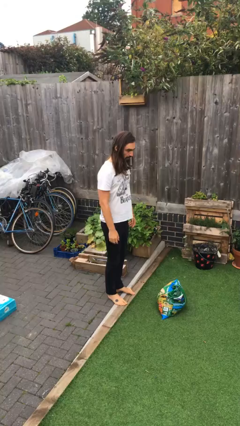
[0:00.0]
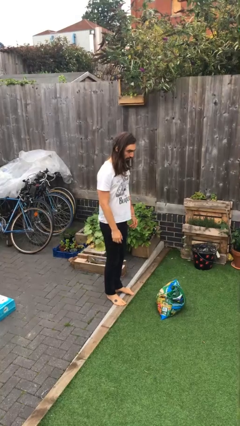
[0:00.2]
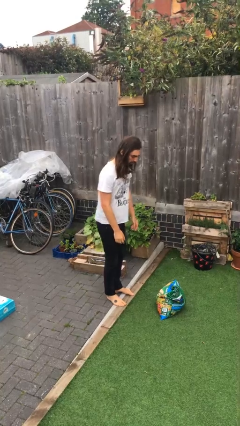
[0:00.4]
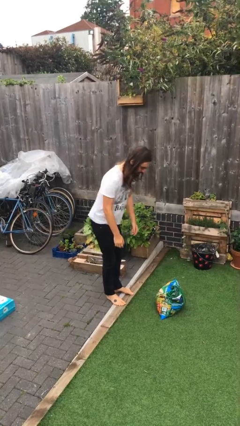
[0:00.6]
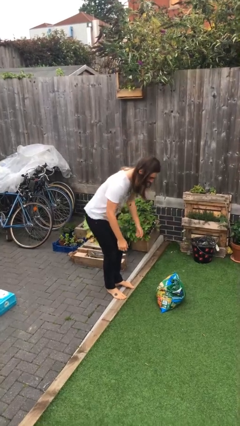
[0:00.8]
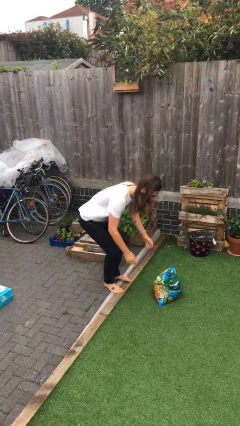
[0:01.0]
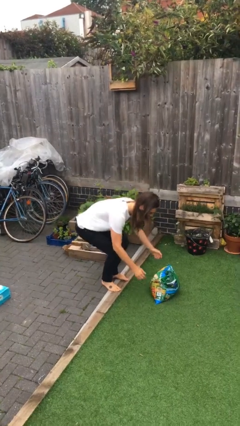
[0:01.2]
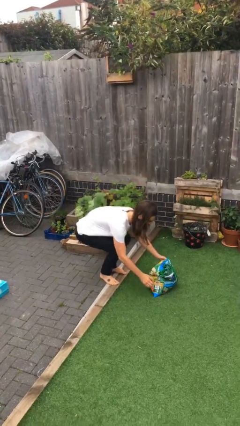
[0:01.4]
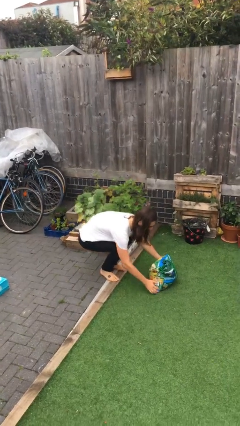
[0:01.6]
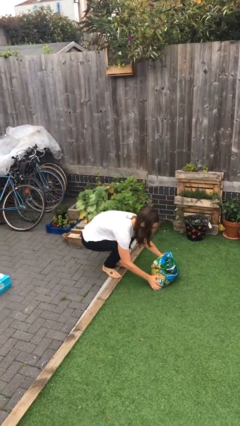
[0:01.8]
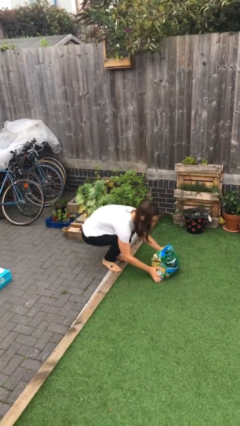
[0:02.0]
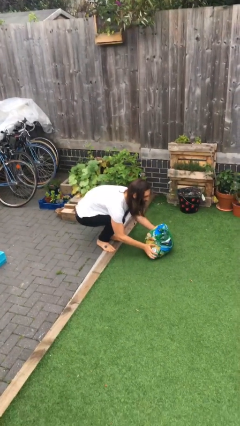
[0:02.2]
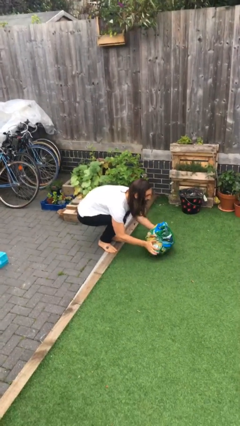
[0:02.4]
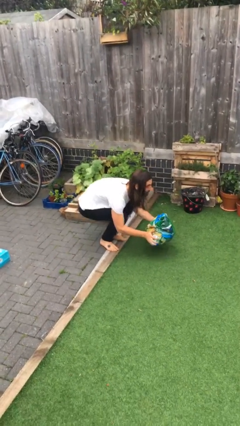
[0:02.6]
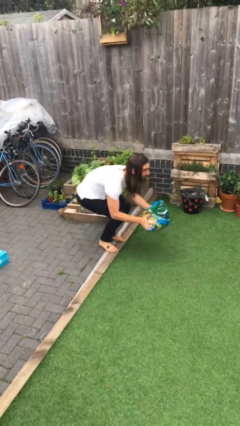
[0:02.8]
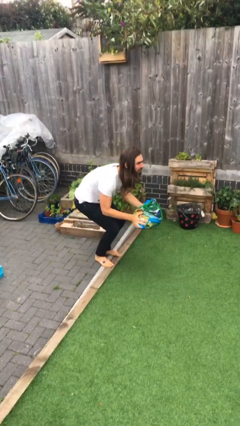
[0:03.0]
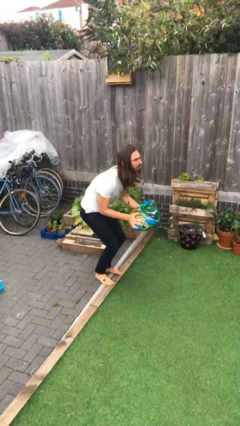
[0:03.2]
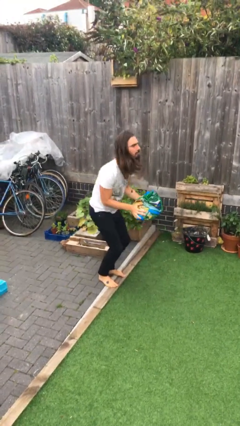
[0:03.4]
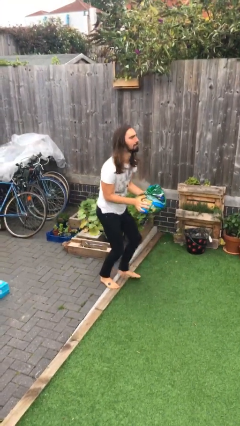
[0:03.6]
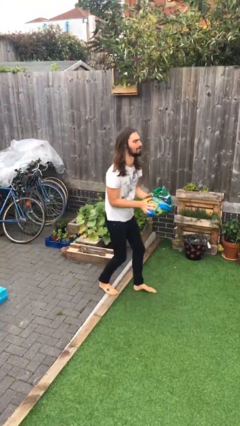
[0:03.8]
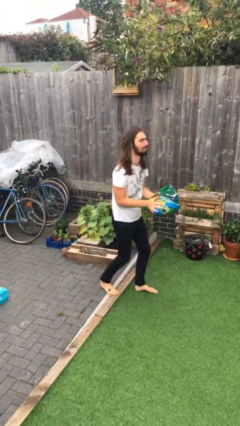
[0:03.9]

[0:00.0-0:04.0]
person picks up object from floor

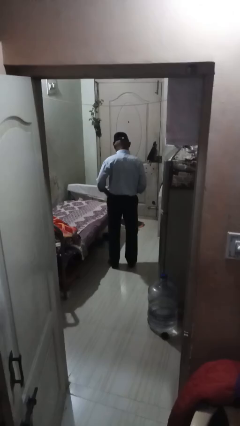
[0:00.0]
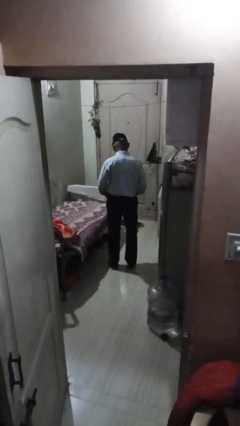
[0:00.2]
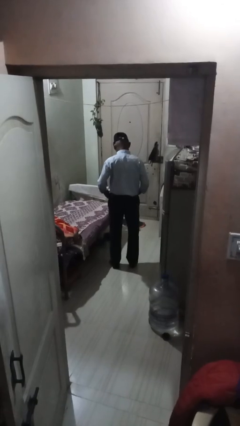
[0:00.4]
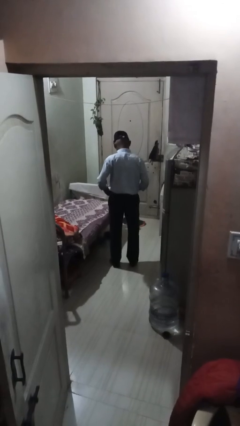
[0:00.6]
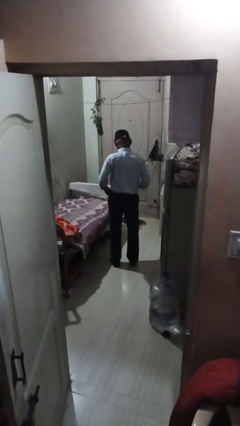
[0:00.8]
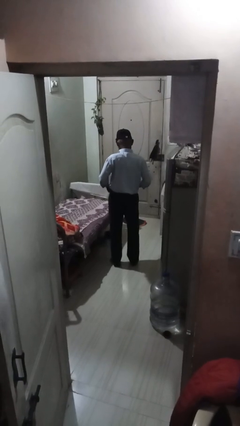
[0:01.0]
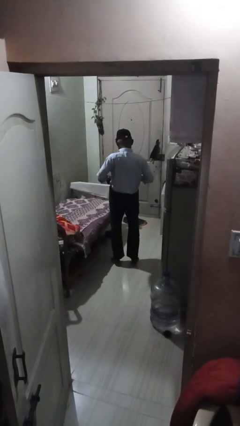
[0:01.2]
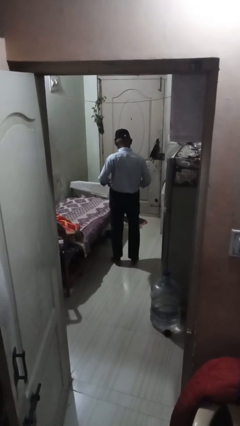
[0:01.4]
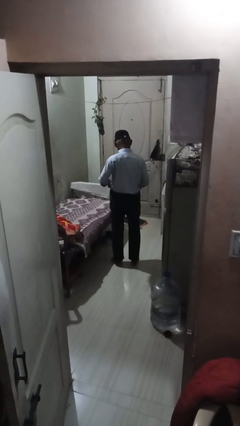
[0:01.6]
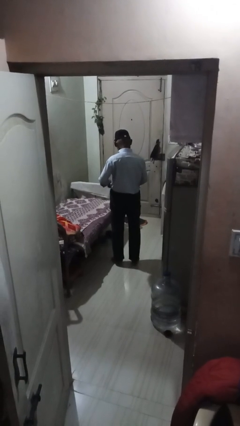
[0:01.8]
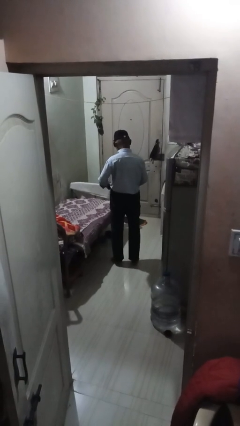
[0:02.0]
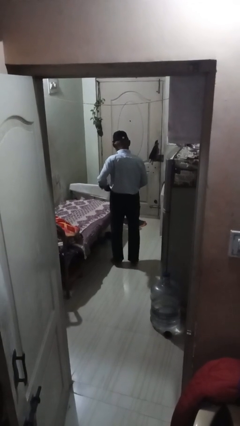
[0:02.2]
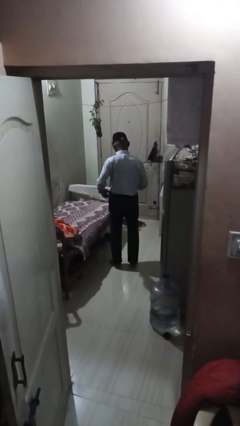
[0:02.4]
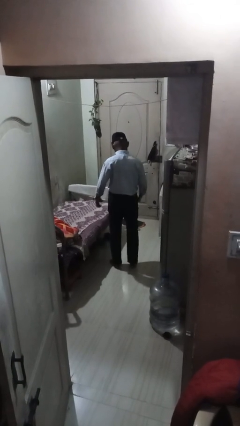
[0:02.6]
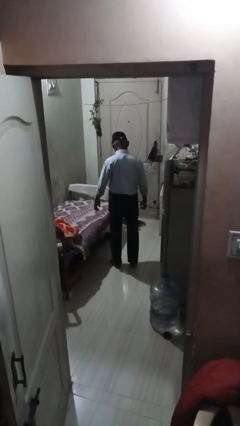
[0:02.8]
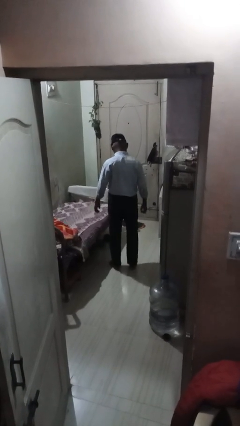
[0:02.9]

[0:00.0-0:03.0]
person hikes up pants

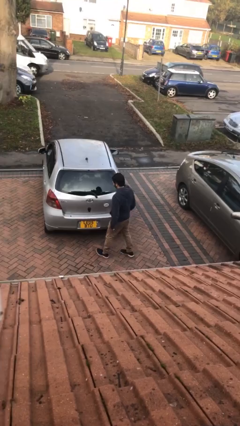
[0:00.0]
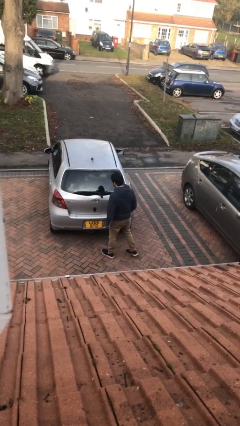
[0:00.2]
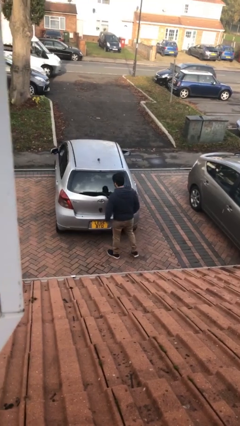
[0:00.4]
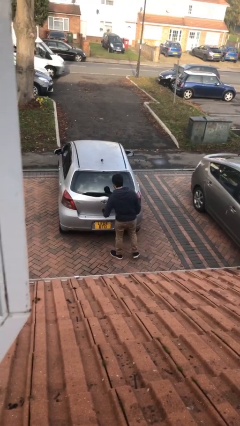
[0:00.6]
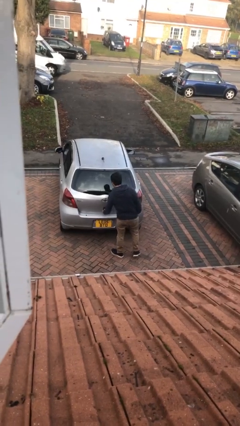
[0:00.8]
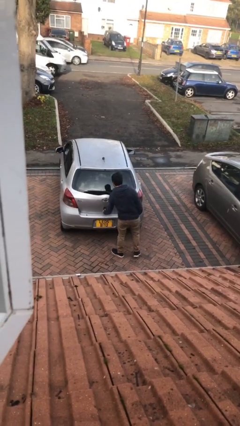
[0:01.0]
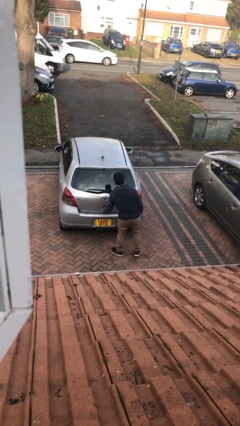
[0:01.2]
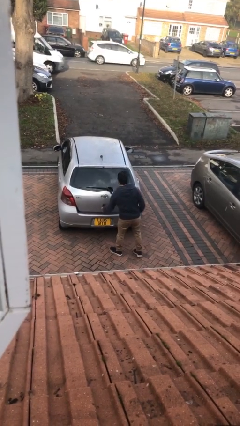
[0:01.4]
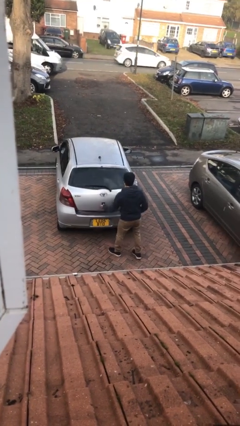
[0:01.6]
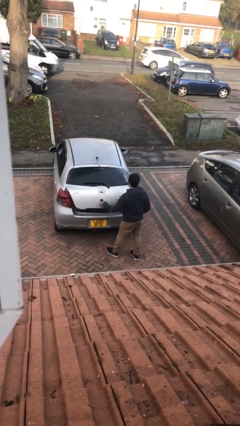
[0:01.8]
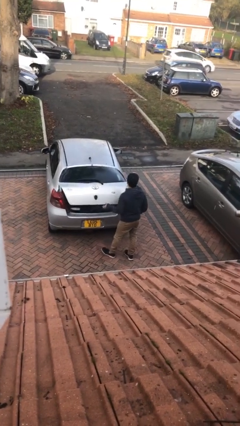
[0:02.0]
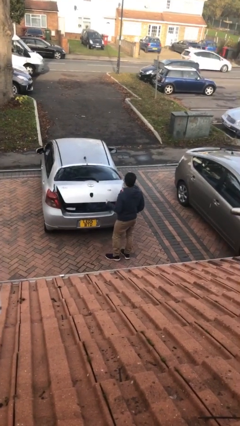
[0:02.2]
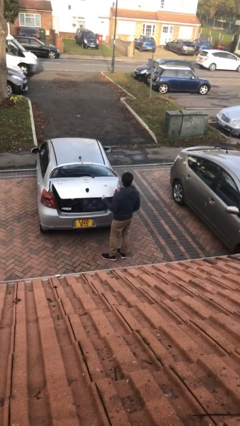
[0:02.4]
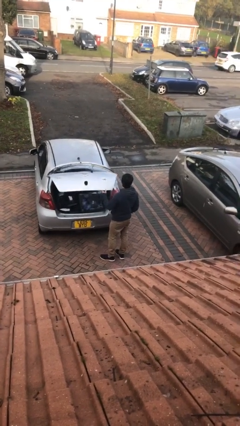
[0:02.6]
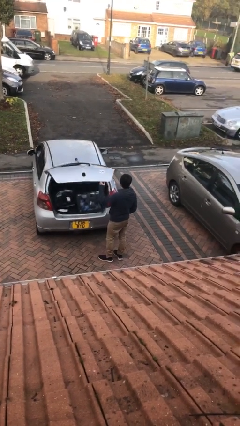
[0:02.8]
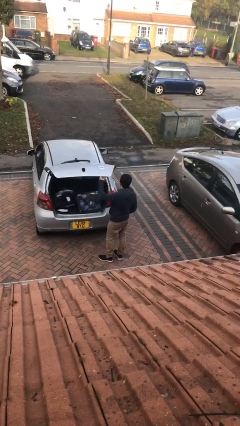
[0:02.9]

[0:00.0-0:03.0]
person opens car trunk

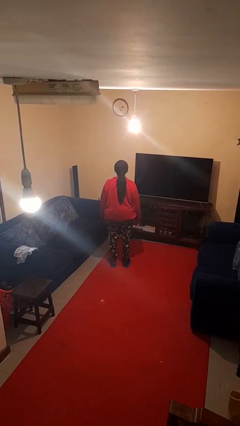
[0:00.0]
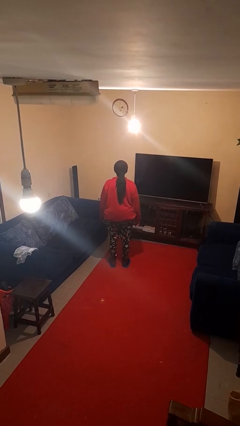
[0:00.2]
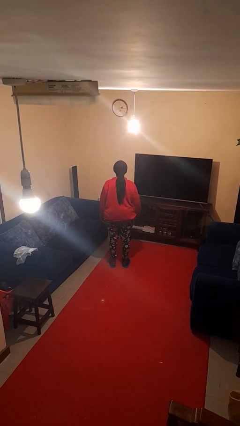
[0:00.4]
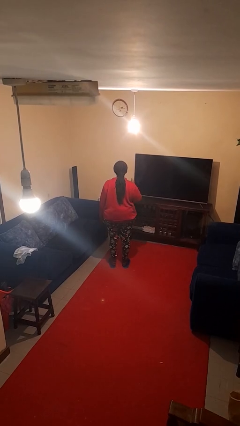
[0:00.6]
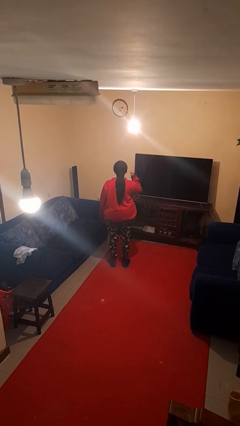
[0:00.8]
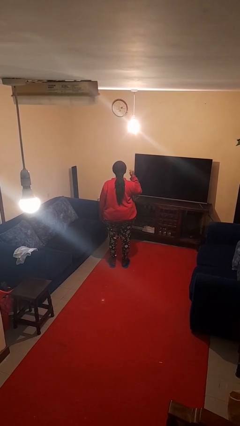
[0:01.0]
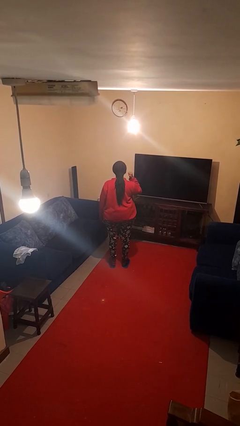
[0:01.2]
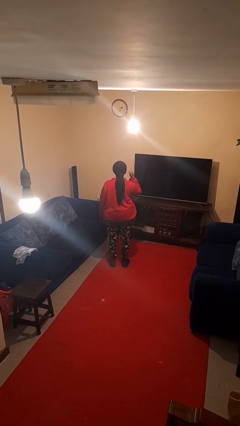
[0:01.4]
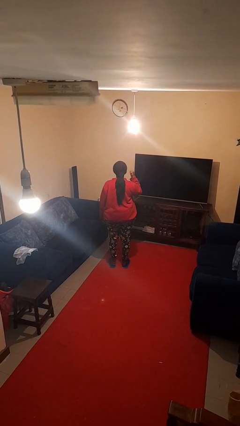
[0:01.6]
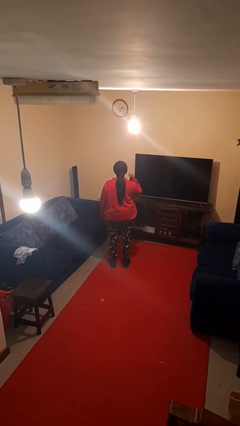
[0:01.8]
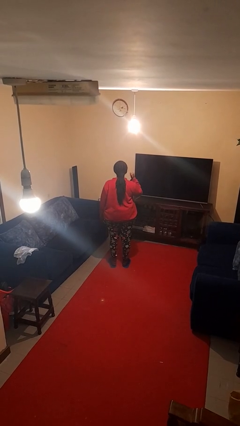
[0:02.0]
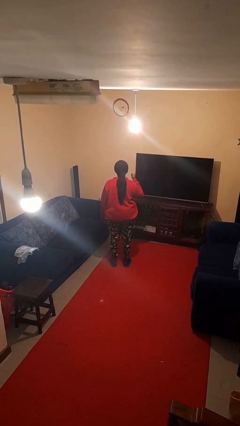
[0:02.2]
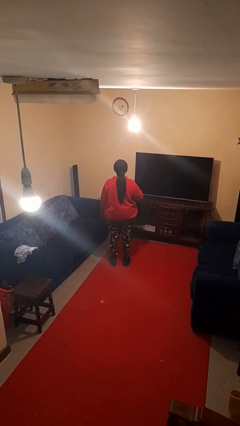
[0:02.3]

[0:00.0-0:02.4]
person gestures behind me

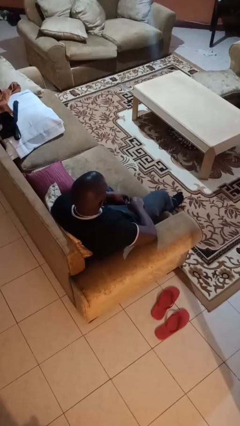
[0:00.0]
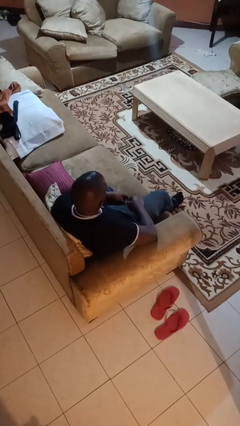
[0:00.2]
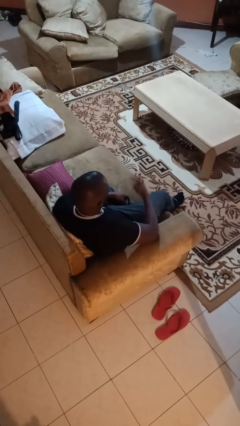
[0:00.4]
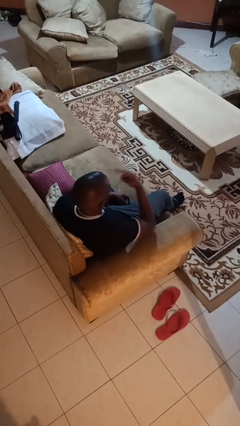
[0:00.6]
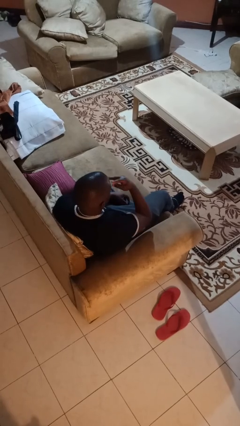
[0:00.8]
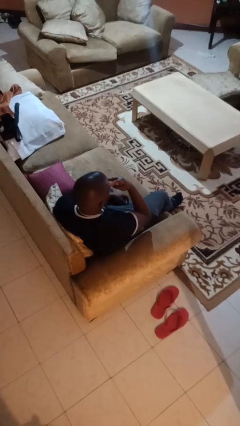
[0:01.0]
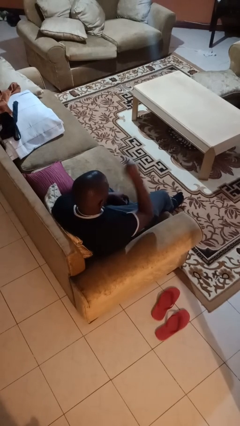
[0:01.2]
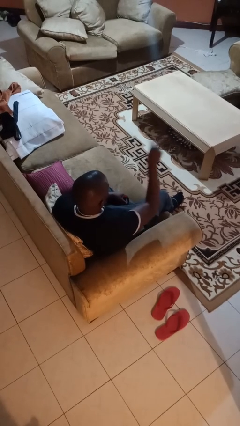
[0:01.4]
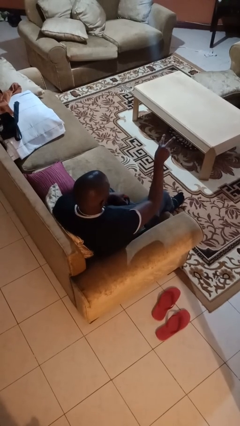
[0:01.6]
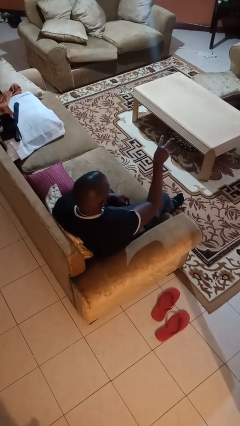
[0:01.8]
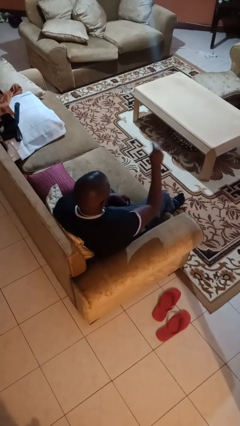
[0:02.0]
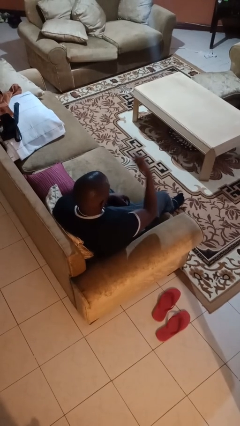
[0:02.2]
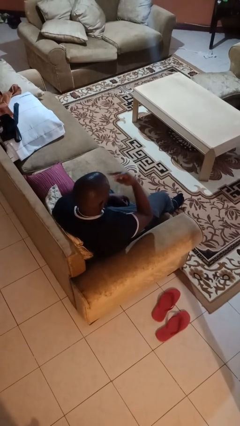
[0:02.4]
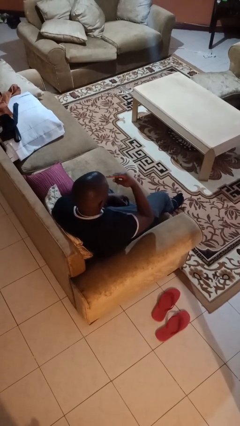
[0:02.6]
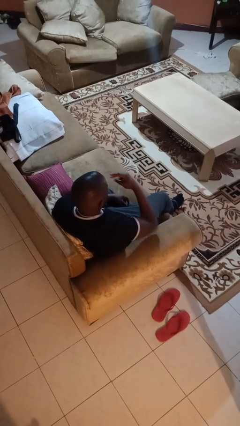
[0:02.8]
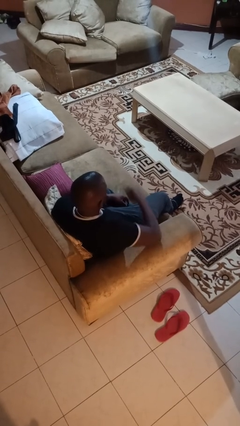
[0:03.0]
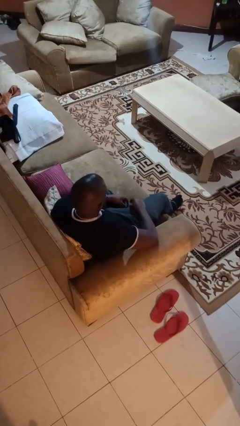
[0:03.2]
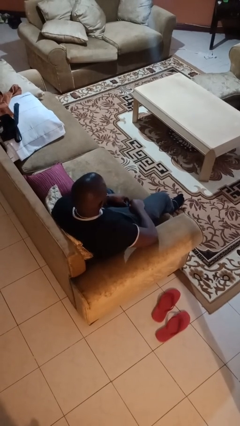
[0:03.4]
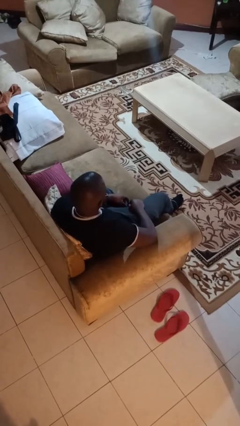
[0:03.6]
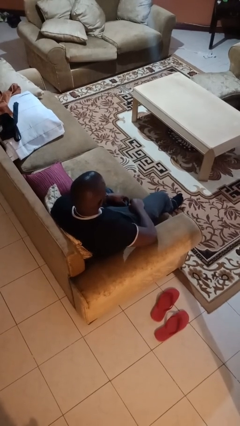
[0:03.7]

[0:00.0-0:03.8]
person gestures watch closely

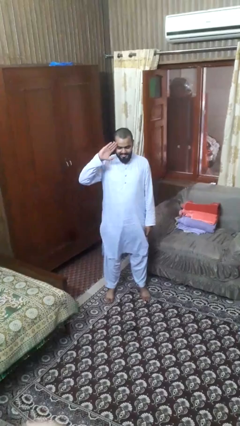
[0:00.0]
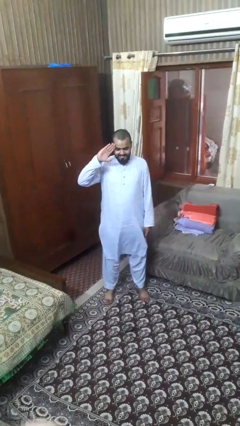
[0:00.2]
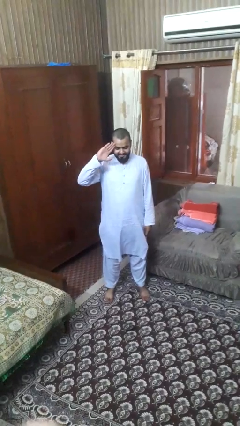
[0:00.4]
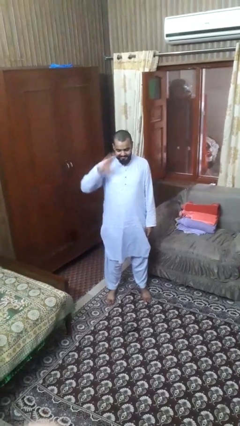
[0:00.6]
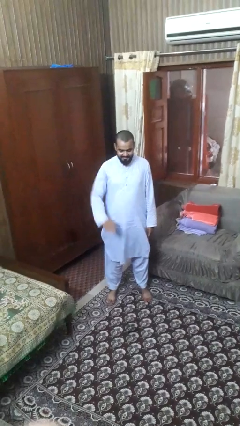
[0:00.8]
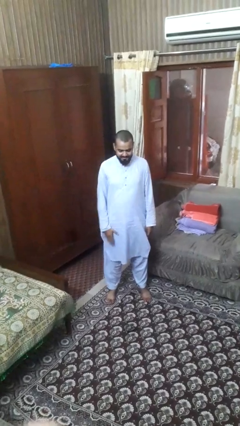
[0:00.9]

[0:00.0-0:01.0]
person salutes
